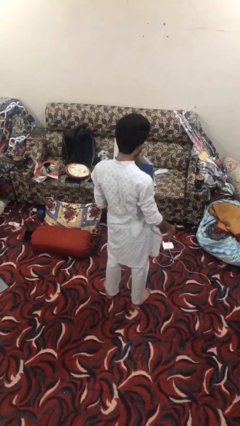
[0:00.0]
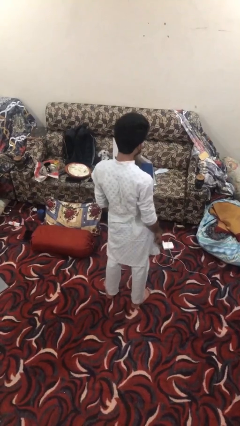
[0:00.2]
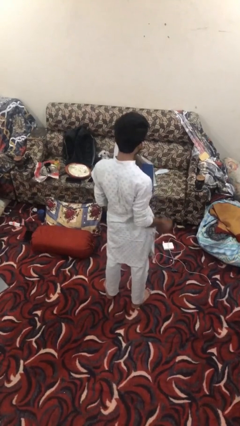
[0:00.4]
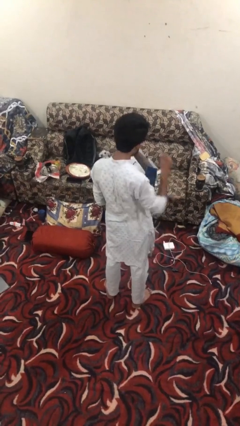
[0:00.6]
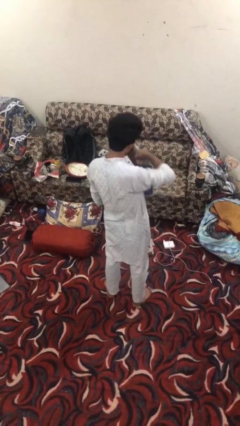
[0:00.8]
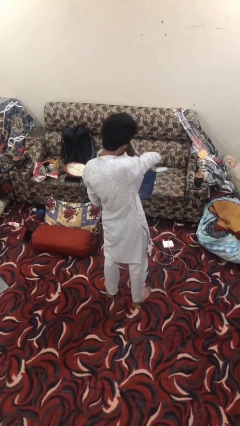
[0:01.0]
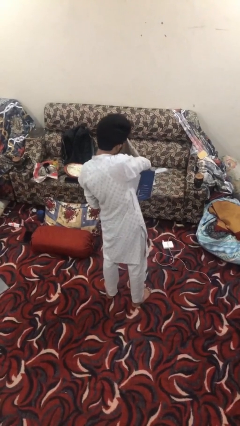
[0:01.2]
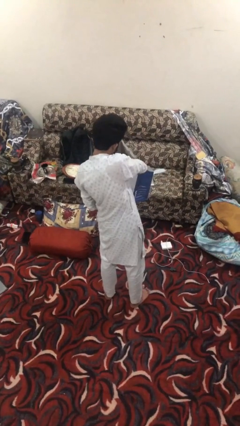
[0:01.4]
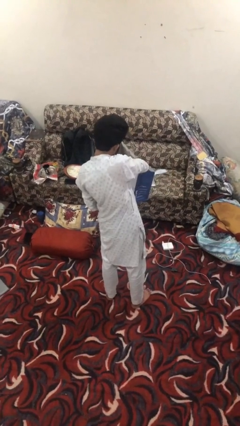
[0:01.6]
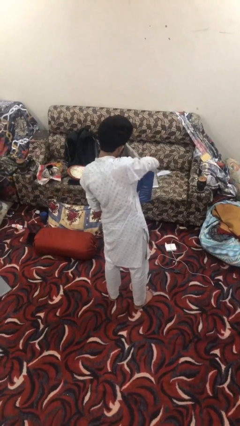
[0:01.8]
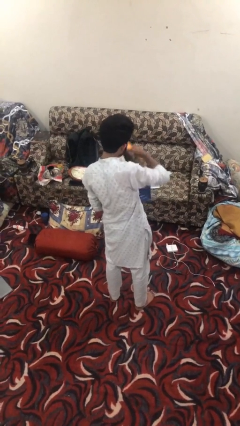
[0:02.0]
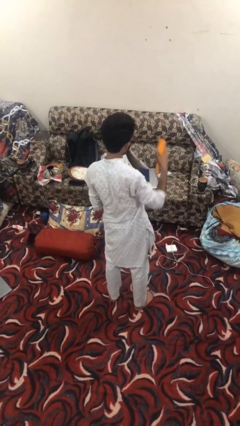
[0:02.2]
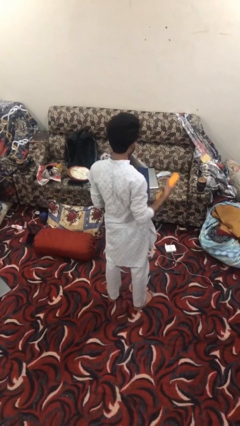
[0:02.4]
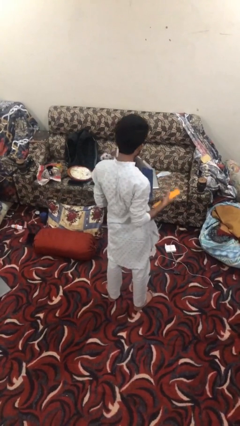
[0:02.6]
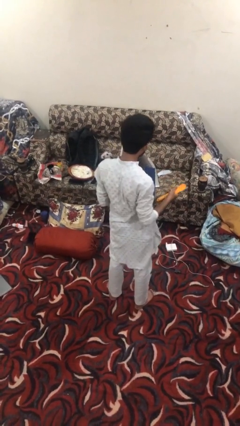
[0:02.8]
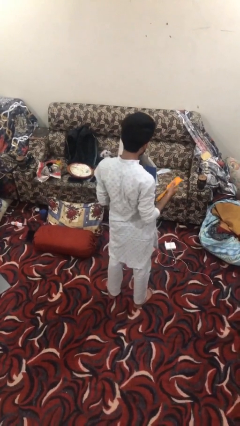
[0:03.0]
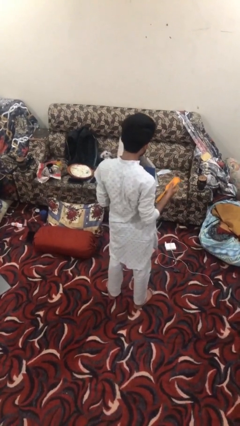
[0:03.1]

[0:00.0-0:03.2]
person takes object from bag

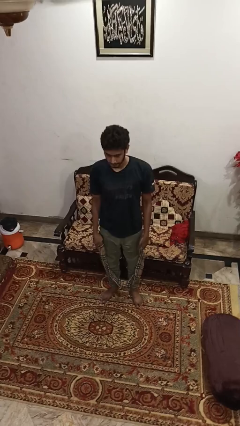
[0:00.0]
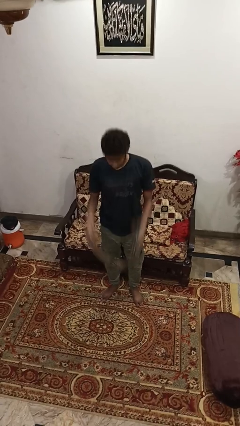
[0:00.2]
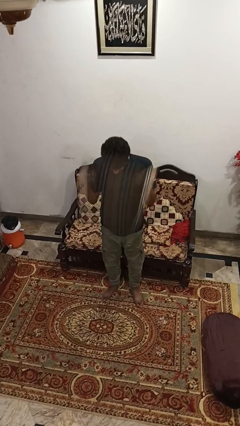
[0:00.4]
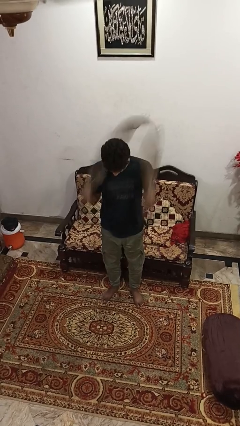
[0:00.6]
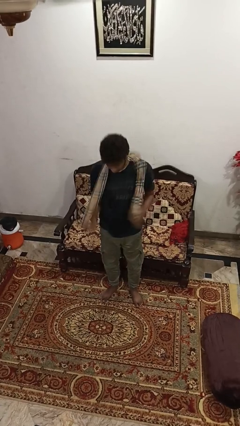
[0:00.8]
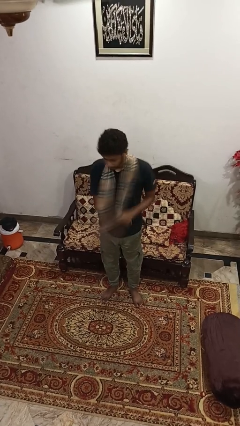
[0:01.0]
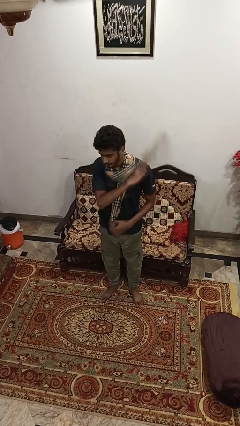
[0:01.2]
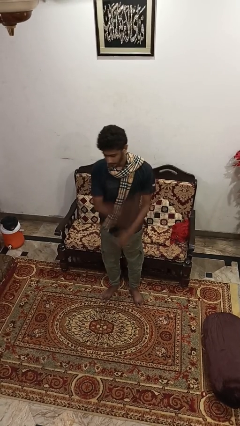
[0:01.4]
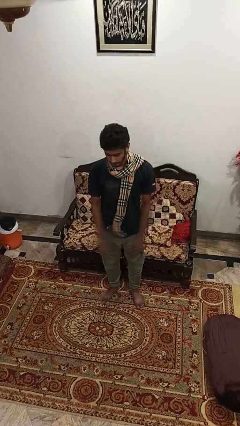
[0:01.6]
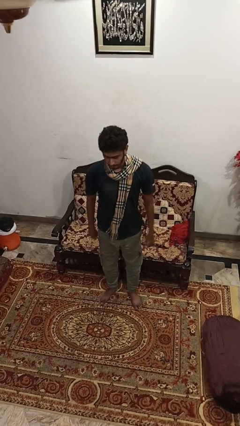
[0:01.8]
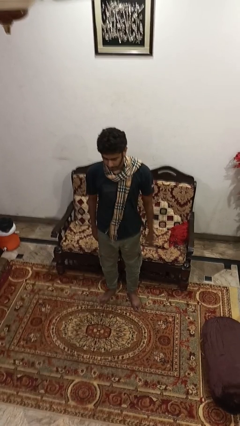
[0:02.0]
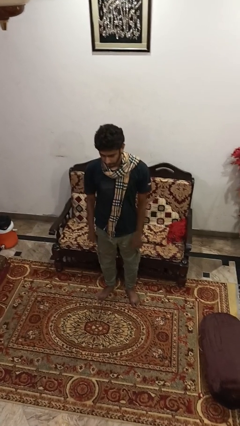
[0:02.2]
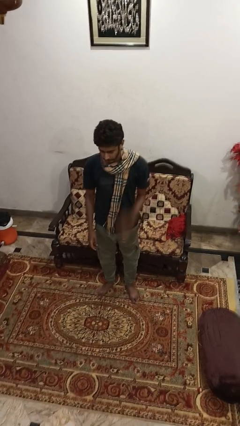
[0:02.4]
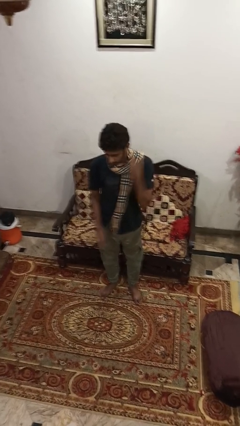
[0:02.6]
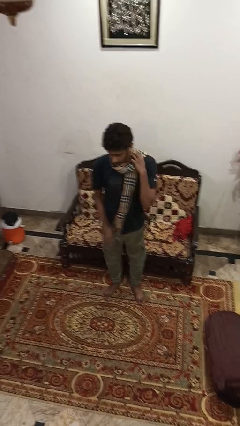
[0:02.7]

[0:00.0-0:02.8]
person puts on scarf

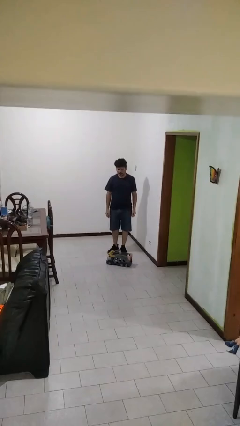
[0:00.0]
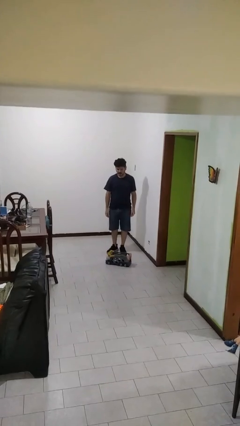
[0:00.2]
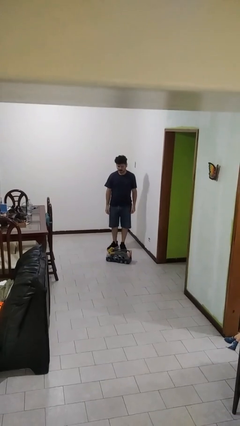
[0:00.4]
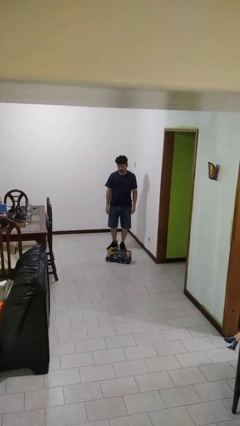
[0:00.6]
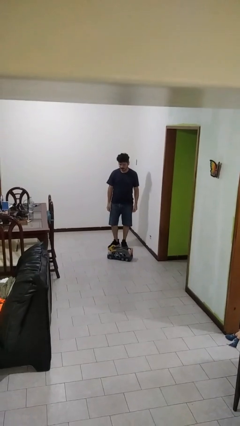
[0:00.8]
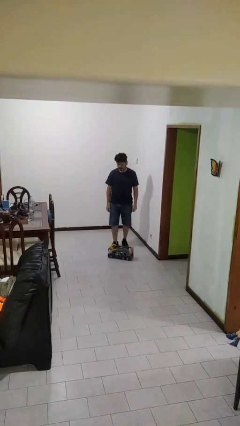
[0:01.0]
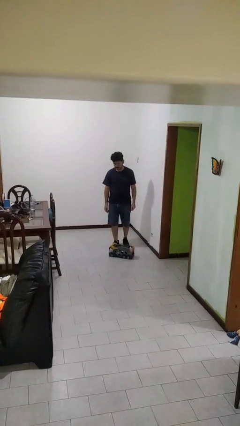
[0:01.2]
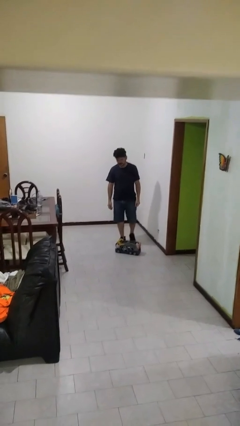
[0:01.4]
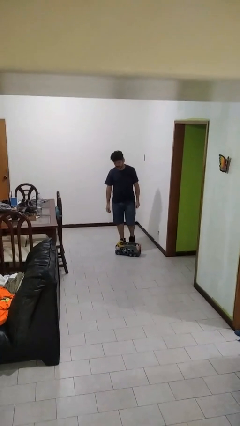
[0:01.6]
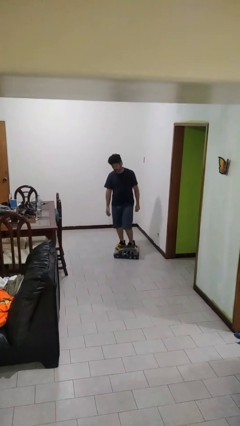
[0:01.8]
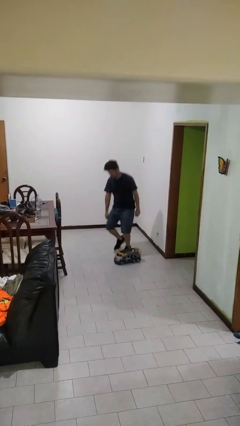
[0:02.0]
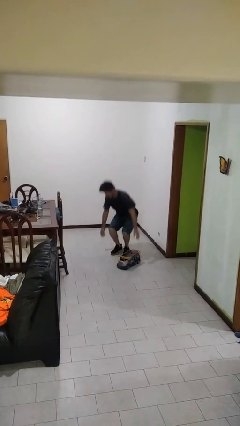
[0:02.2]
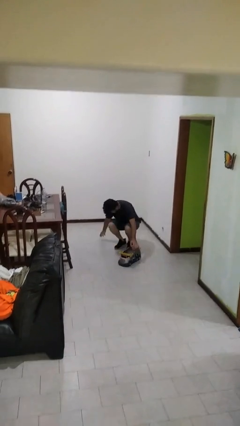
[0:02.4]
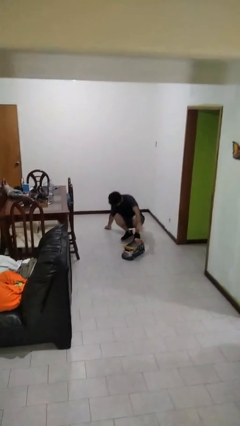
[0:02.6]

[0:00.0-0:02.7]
person trips on object on floor

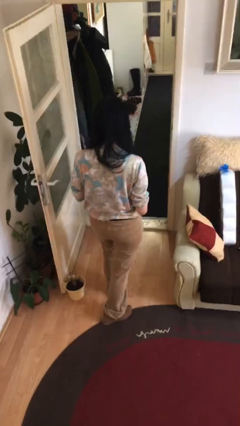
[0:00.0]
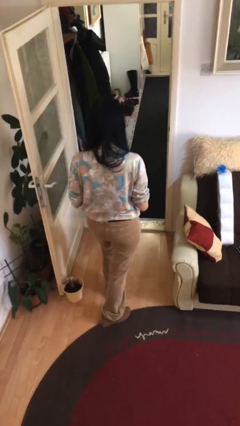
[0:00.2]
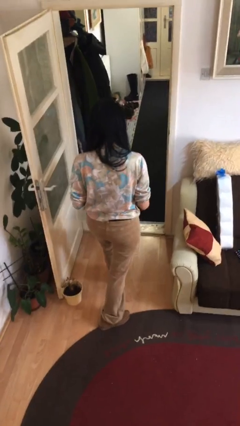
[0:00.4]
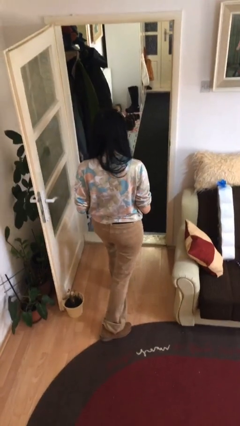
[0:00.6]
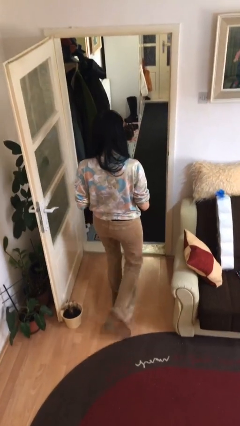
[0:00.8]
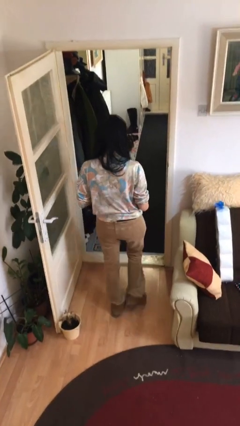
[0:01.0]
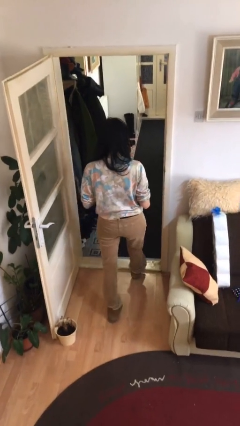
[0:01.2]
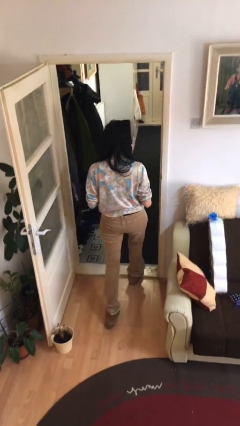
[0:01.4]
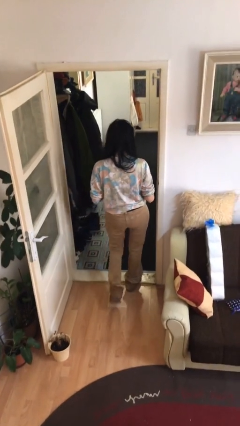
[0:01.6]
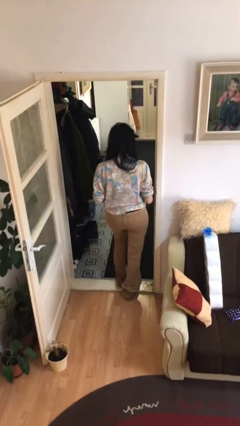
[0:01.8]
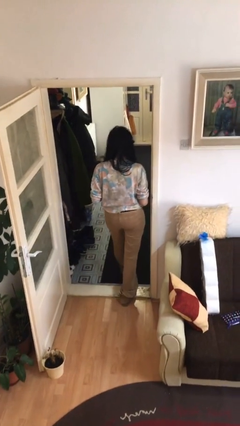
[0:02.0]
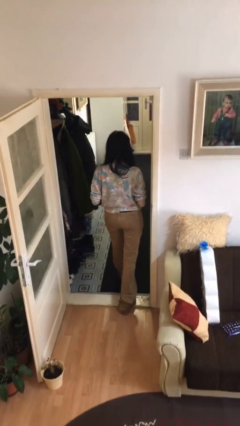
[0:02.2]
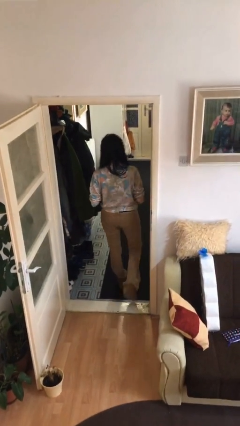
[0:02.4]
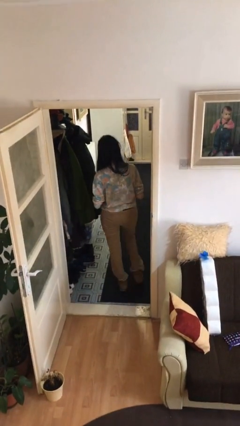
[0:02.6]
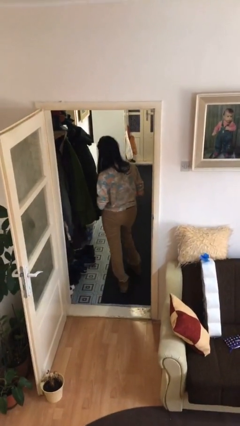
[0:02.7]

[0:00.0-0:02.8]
person exits scene through structure

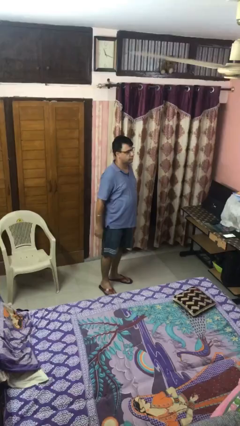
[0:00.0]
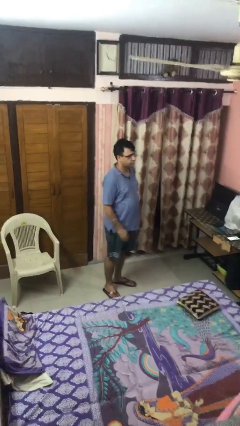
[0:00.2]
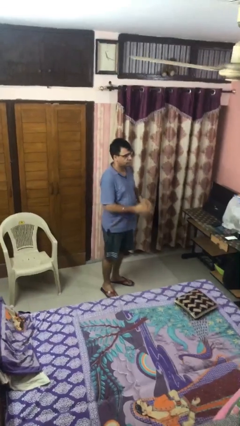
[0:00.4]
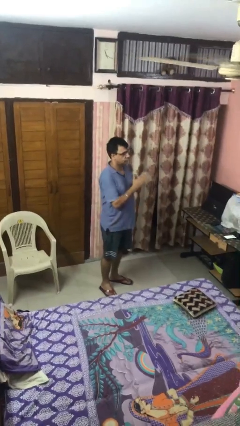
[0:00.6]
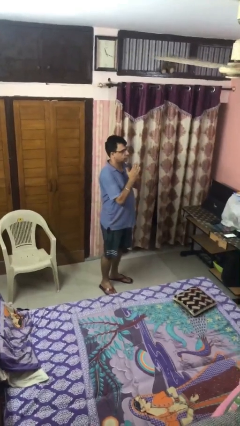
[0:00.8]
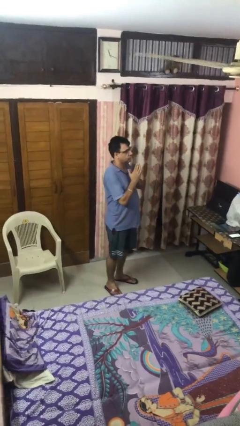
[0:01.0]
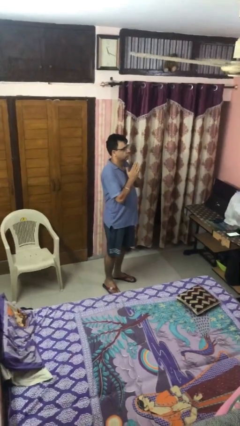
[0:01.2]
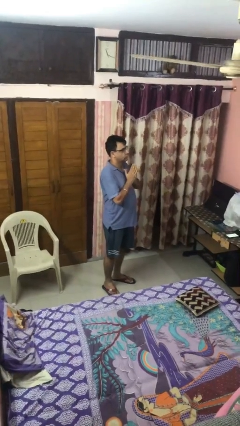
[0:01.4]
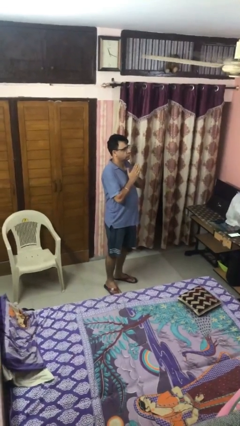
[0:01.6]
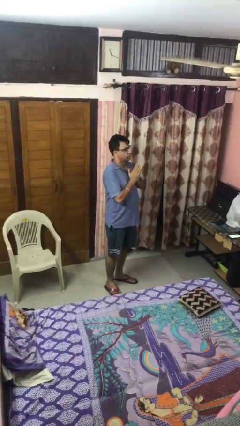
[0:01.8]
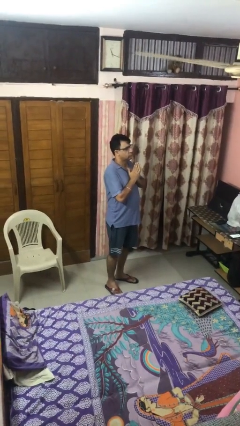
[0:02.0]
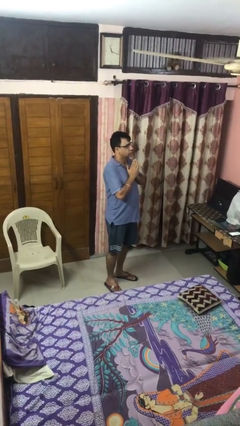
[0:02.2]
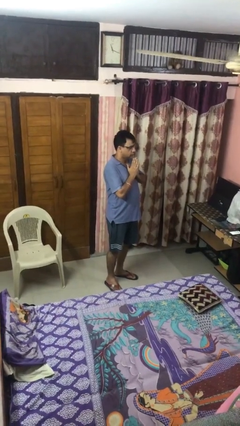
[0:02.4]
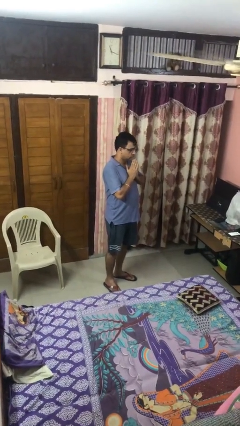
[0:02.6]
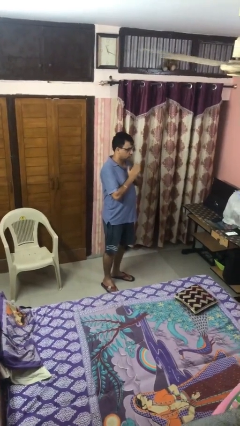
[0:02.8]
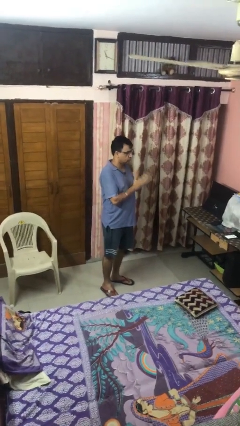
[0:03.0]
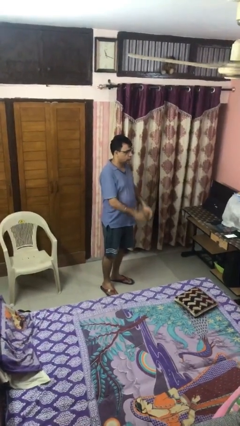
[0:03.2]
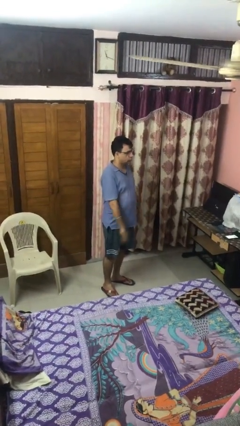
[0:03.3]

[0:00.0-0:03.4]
person prays

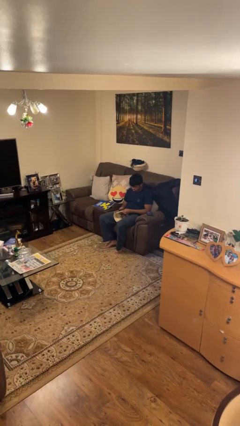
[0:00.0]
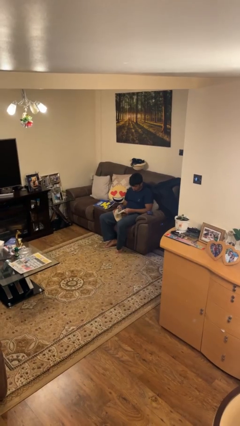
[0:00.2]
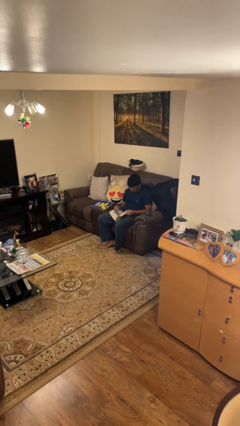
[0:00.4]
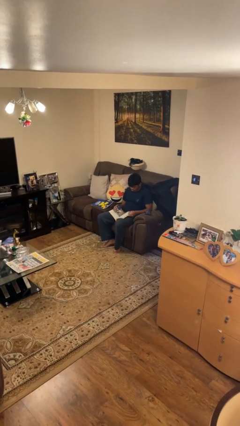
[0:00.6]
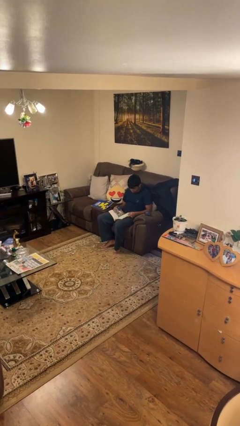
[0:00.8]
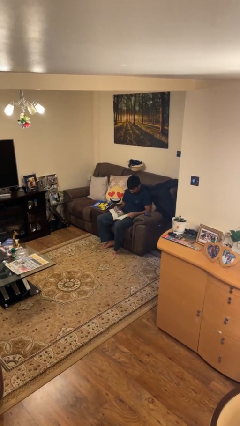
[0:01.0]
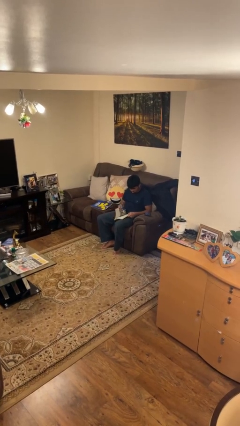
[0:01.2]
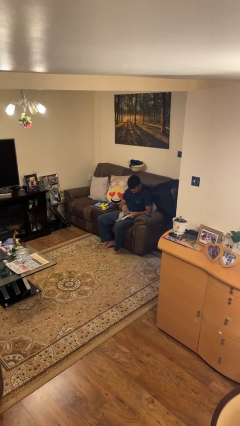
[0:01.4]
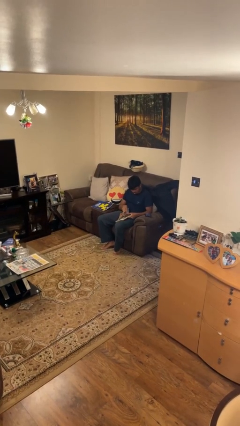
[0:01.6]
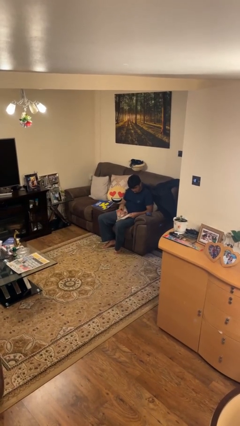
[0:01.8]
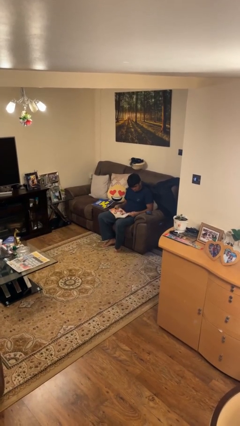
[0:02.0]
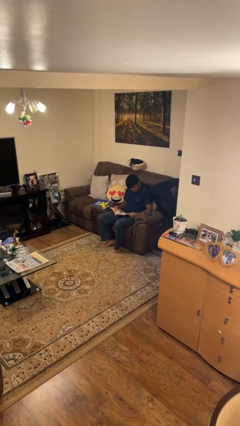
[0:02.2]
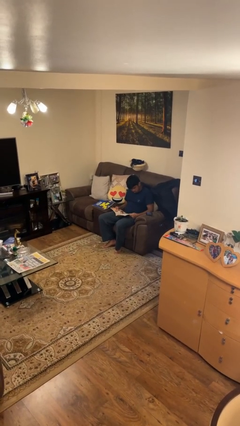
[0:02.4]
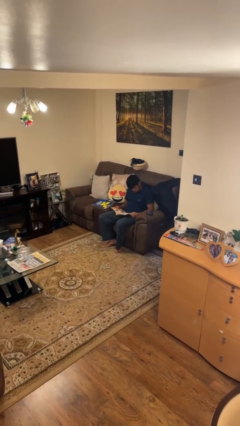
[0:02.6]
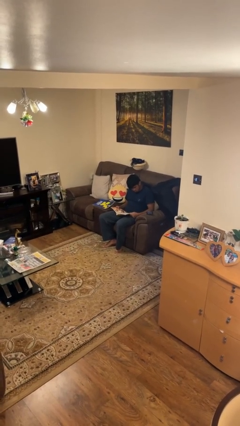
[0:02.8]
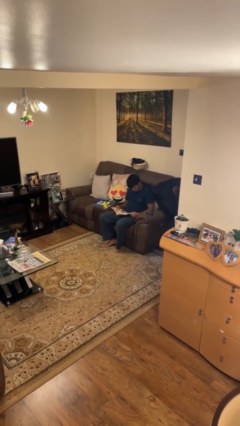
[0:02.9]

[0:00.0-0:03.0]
person reads book
